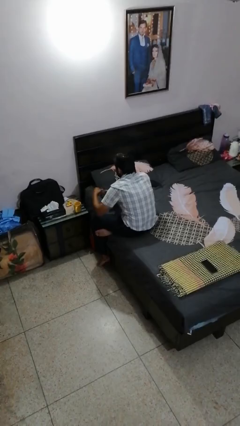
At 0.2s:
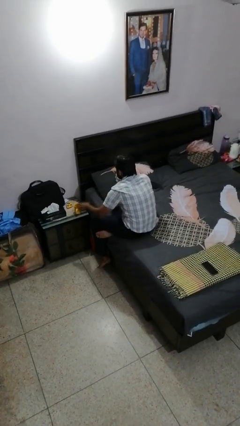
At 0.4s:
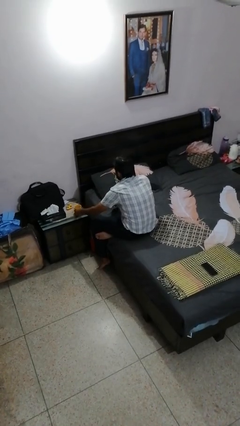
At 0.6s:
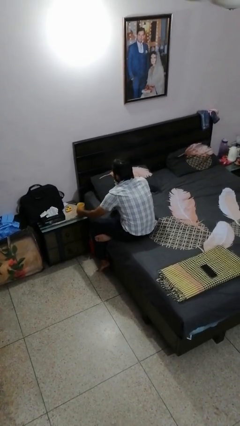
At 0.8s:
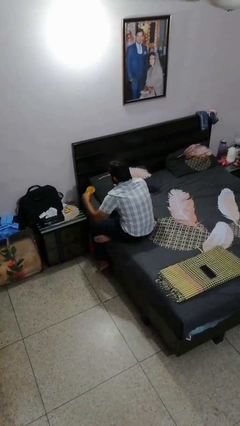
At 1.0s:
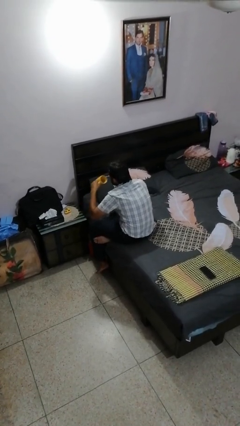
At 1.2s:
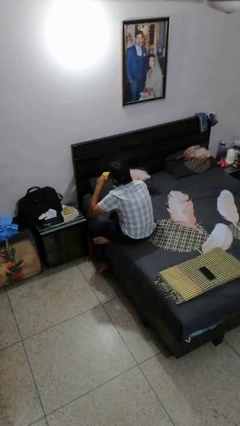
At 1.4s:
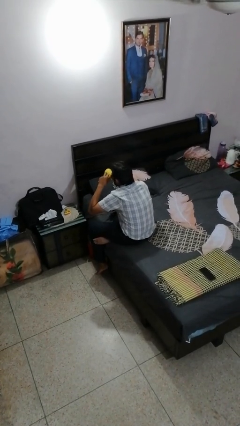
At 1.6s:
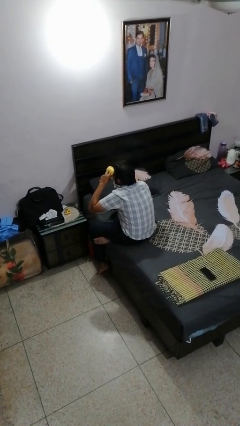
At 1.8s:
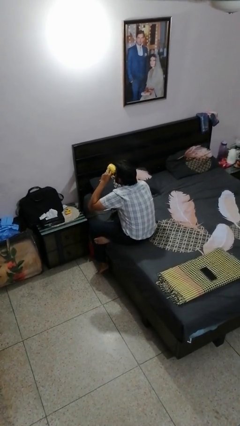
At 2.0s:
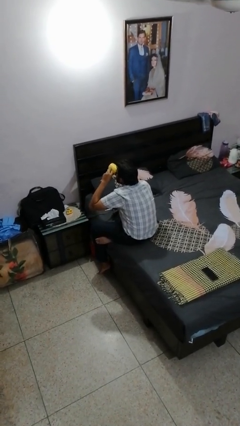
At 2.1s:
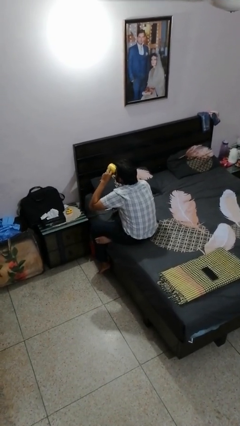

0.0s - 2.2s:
person drinks from mug

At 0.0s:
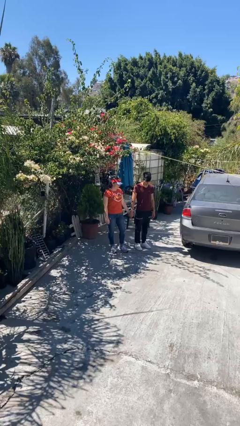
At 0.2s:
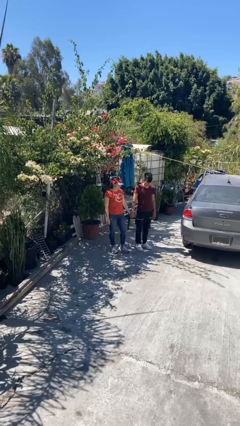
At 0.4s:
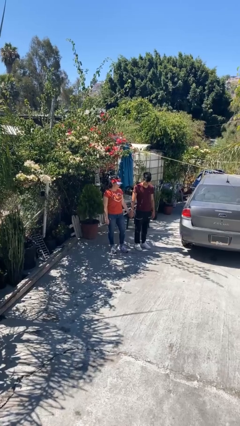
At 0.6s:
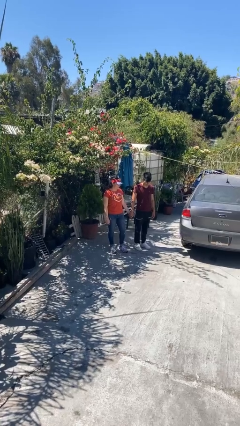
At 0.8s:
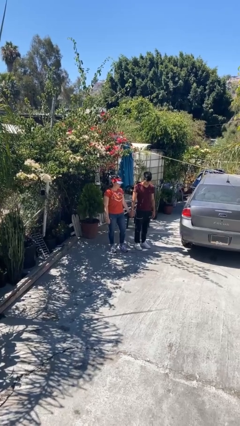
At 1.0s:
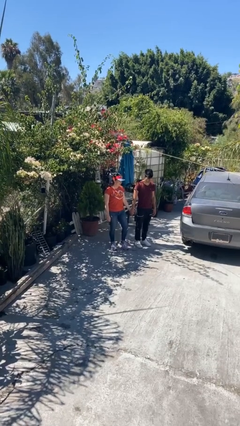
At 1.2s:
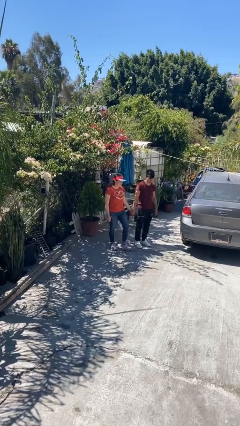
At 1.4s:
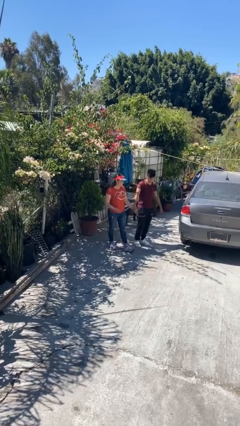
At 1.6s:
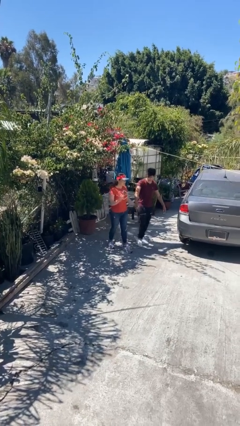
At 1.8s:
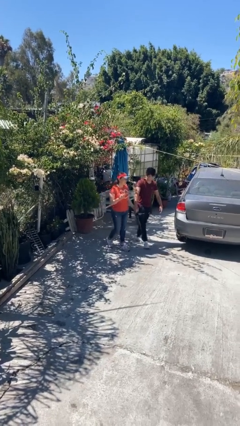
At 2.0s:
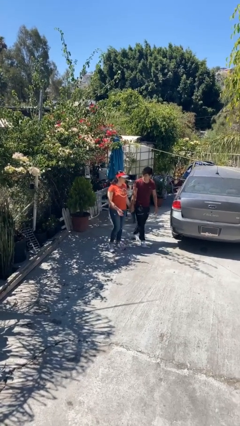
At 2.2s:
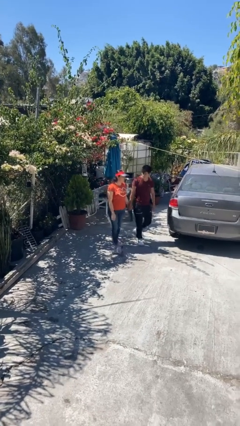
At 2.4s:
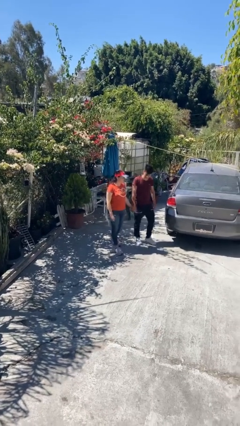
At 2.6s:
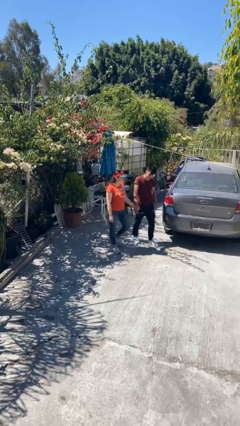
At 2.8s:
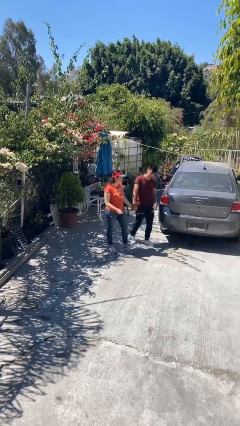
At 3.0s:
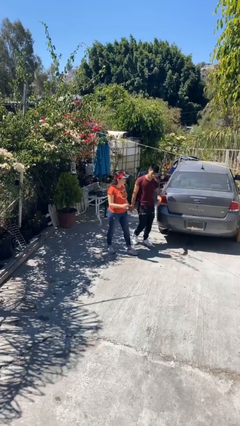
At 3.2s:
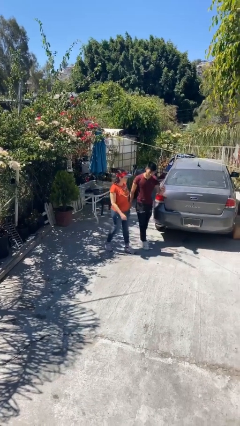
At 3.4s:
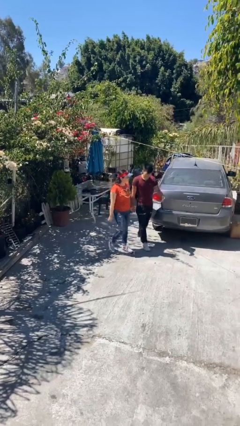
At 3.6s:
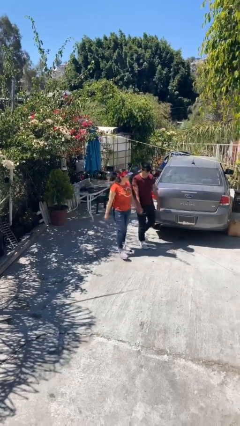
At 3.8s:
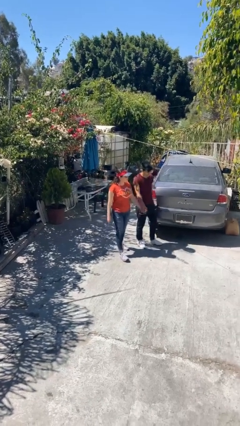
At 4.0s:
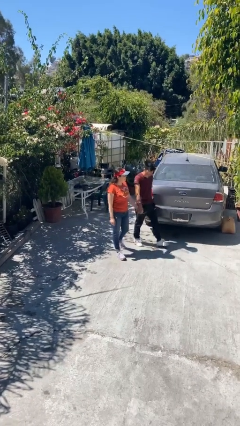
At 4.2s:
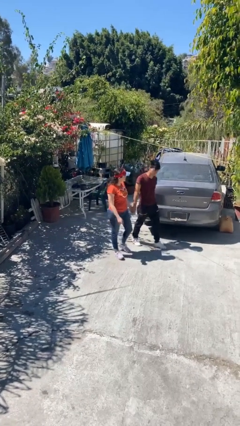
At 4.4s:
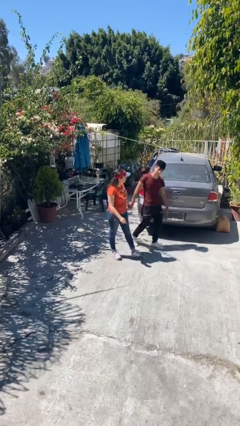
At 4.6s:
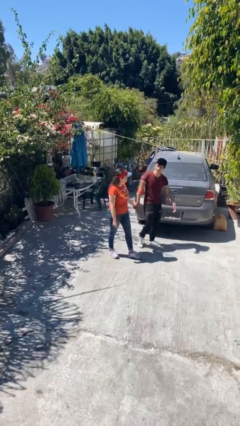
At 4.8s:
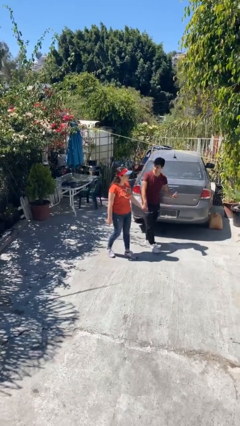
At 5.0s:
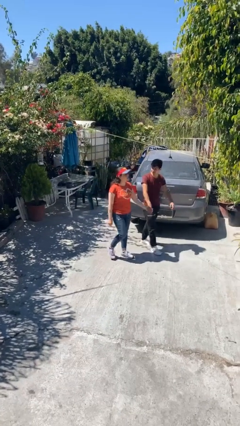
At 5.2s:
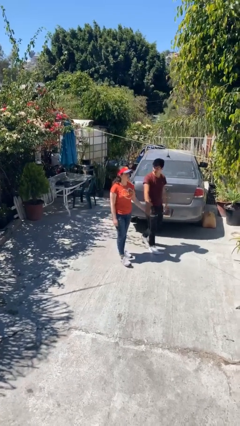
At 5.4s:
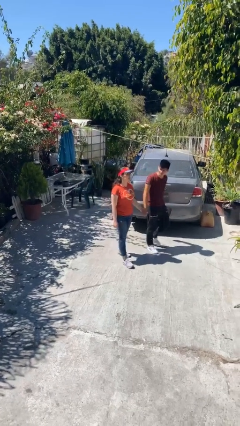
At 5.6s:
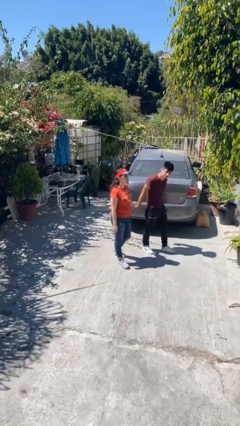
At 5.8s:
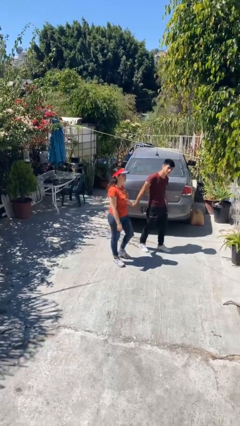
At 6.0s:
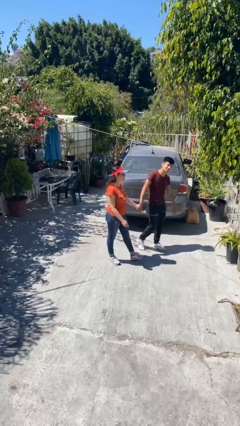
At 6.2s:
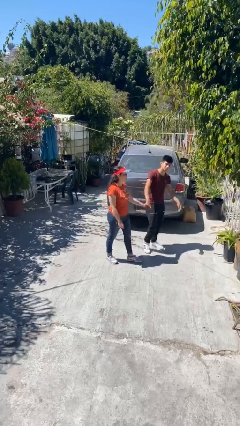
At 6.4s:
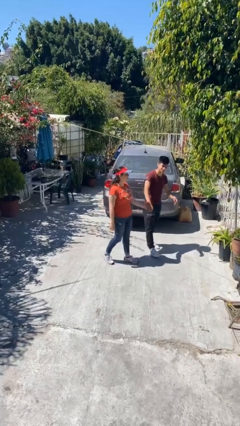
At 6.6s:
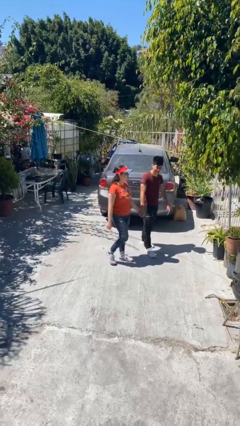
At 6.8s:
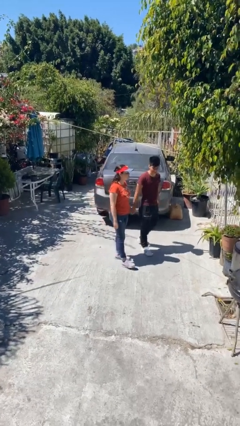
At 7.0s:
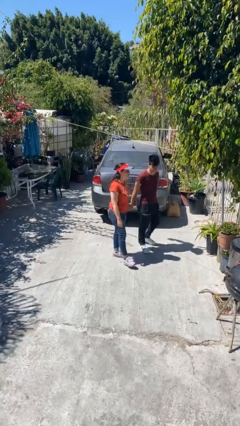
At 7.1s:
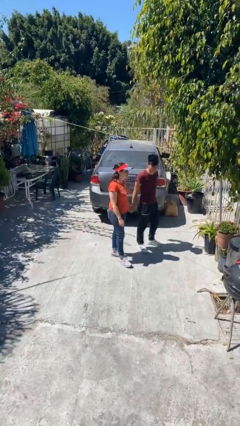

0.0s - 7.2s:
person holds hand

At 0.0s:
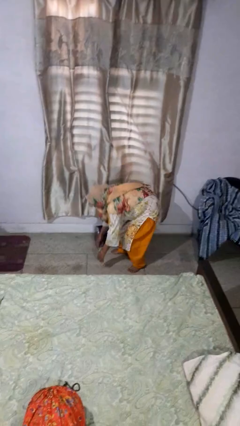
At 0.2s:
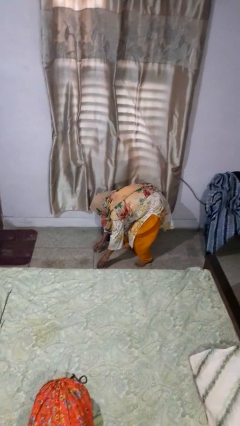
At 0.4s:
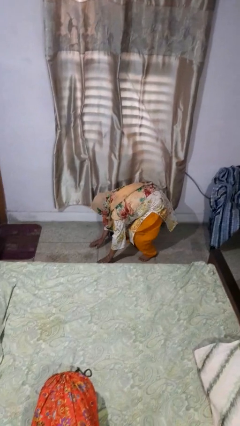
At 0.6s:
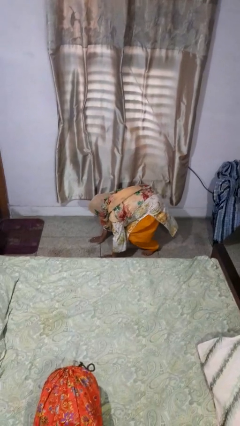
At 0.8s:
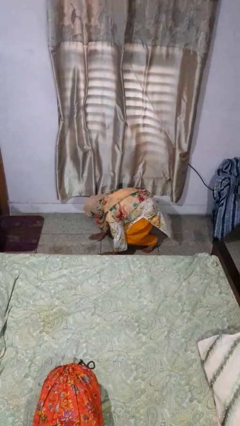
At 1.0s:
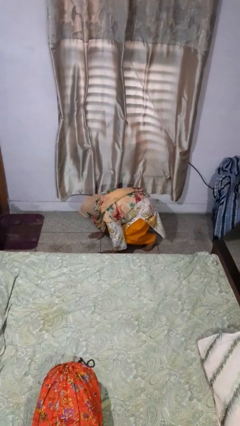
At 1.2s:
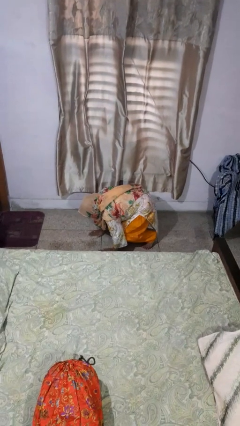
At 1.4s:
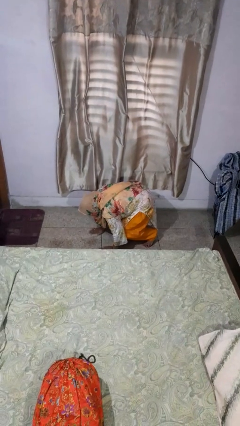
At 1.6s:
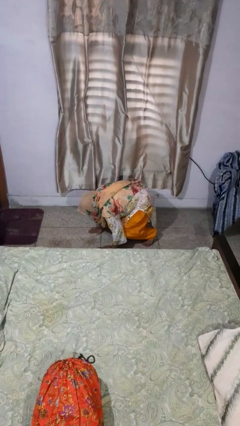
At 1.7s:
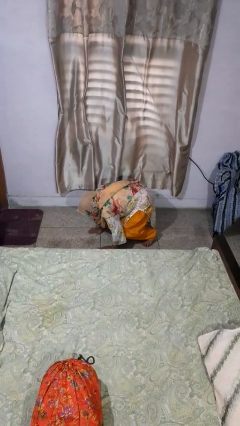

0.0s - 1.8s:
person lies down on floor

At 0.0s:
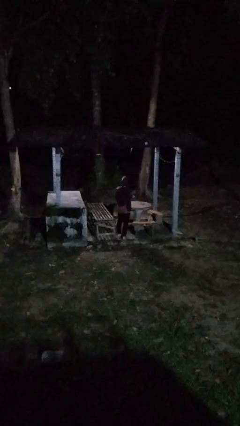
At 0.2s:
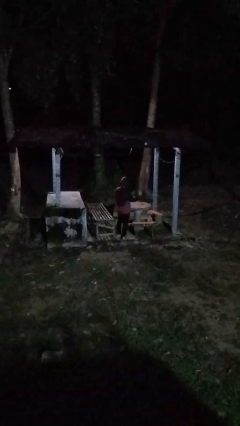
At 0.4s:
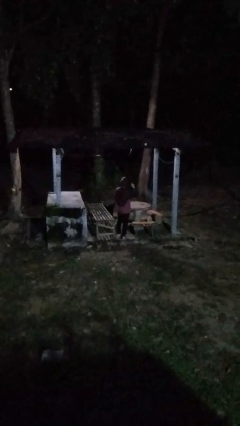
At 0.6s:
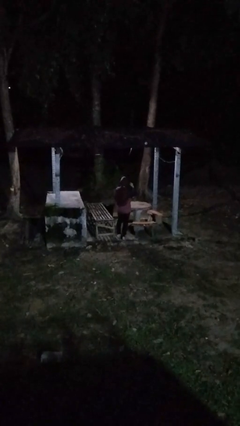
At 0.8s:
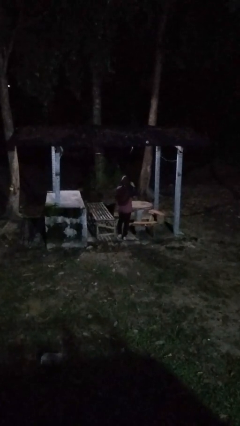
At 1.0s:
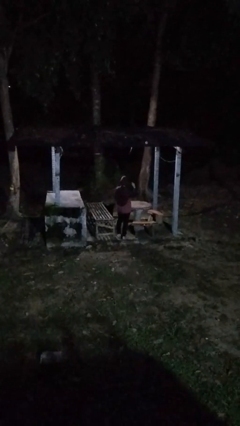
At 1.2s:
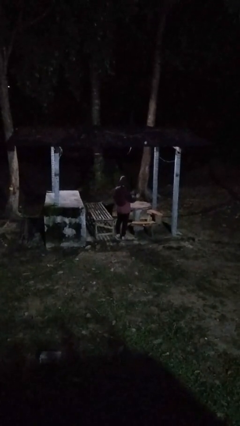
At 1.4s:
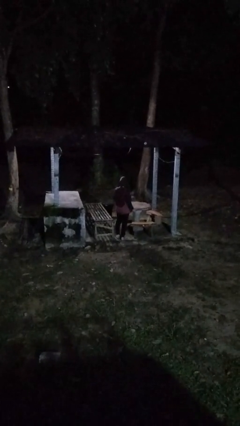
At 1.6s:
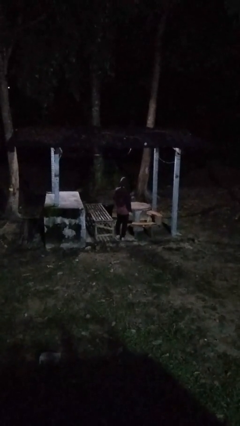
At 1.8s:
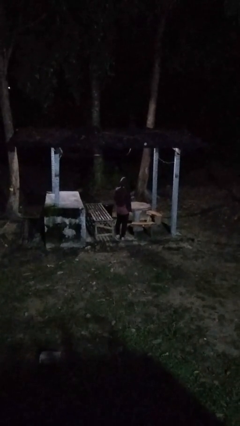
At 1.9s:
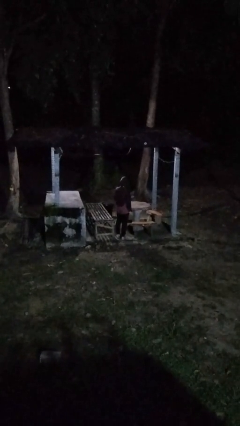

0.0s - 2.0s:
person gestures listen closely

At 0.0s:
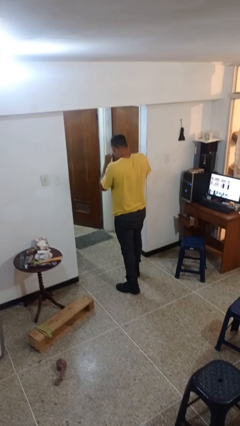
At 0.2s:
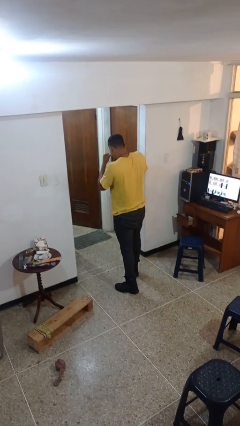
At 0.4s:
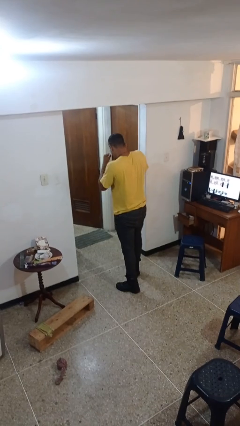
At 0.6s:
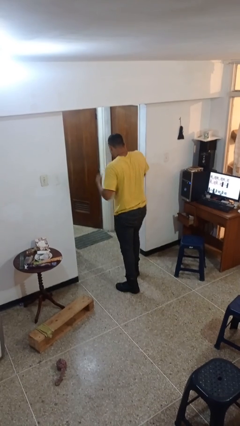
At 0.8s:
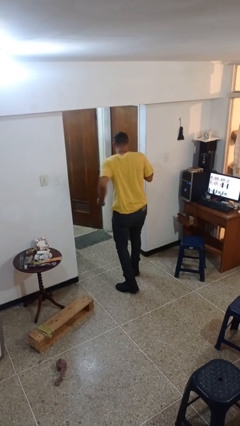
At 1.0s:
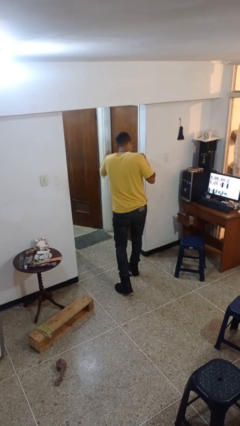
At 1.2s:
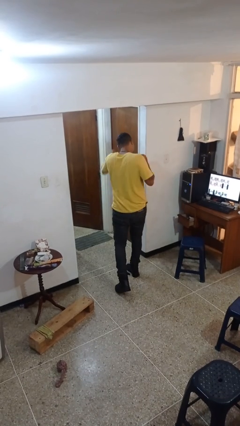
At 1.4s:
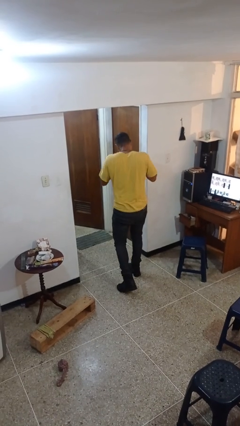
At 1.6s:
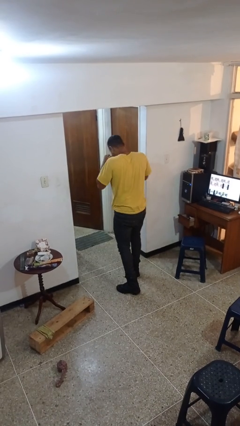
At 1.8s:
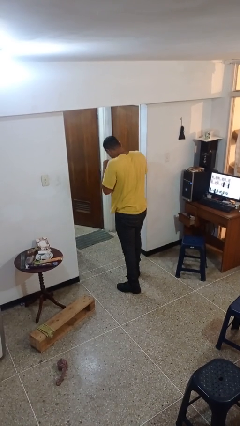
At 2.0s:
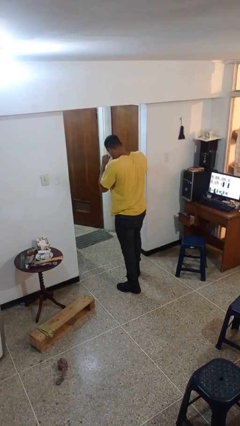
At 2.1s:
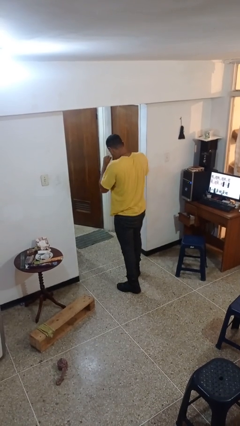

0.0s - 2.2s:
person punches

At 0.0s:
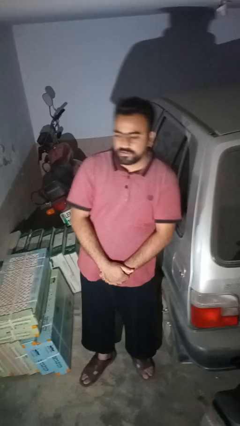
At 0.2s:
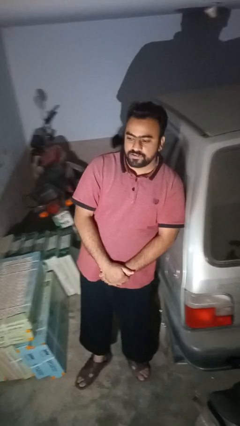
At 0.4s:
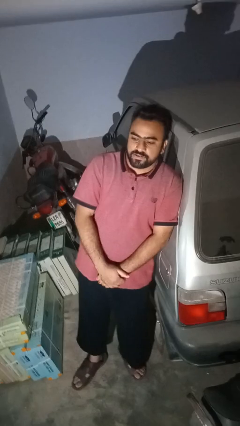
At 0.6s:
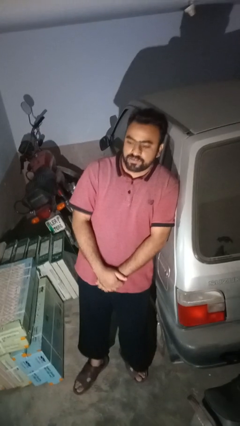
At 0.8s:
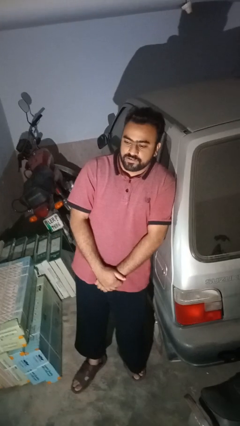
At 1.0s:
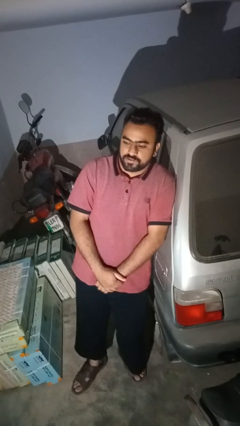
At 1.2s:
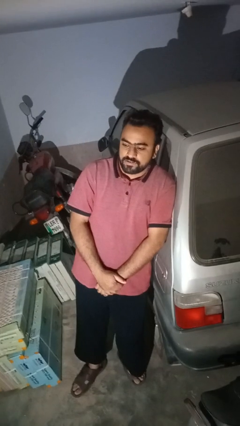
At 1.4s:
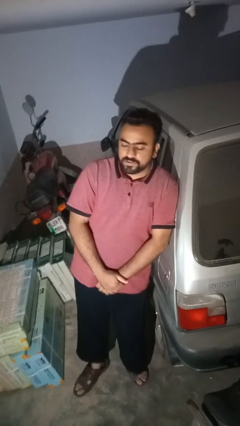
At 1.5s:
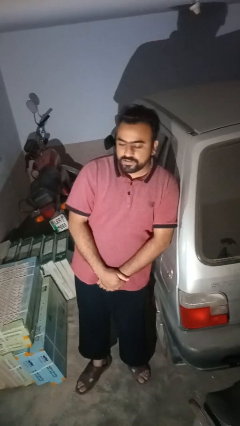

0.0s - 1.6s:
person leans against car

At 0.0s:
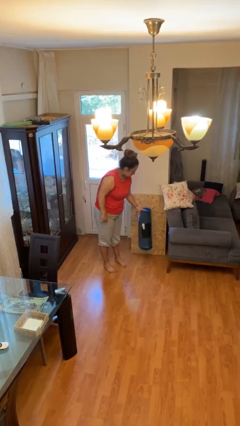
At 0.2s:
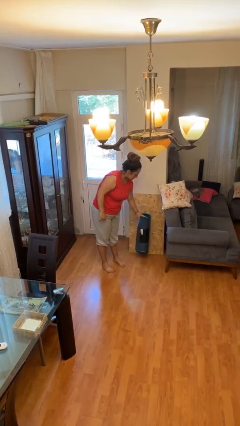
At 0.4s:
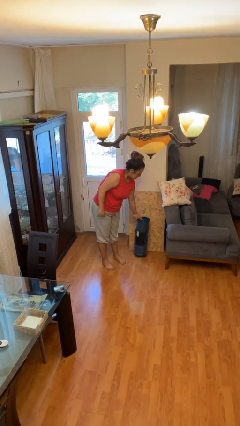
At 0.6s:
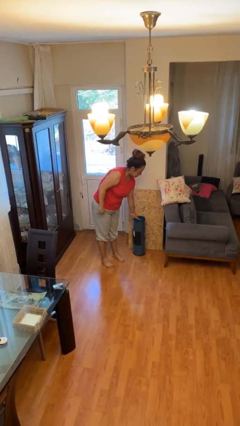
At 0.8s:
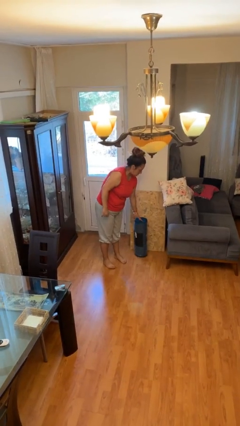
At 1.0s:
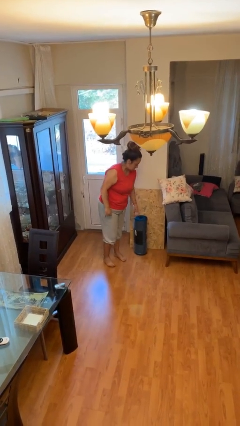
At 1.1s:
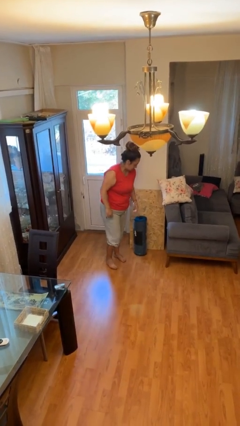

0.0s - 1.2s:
person puts down object on floor
